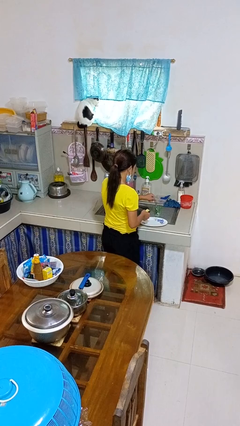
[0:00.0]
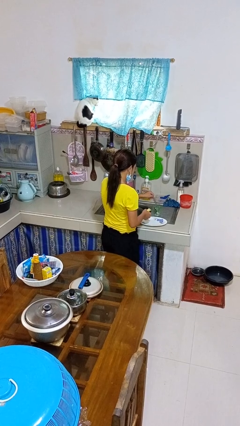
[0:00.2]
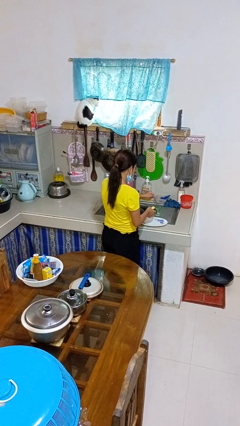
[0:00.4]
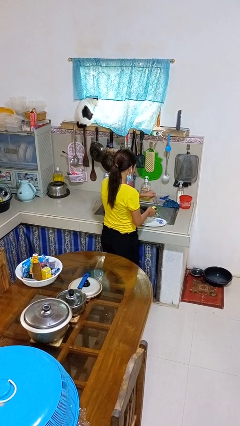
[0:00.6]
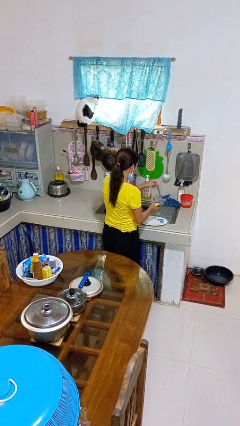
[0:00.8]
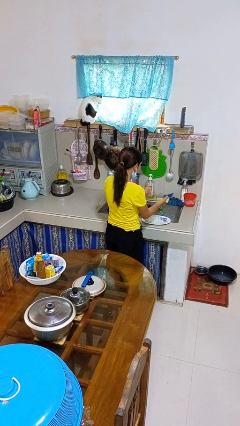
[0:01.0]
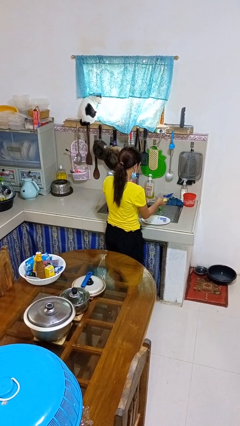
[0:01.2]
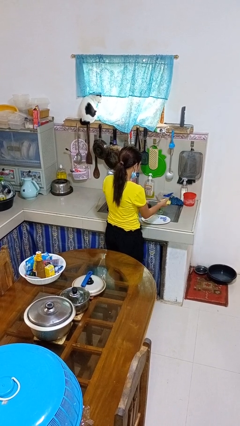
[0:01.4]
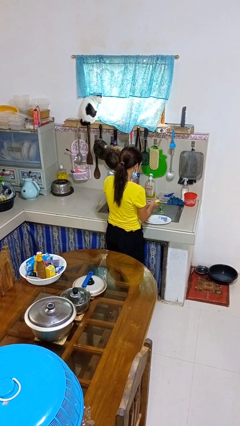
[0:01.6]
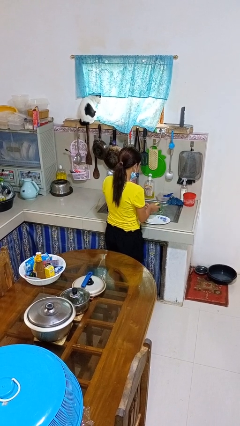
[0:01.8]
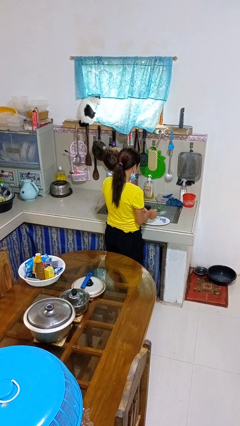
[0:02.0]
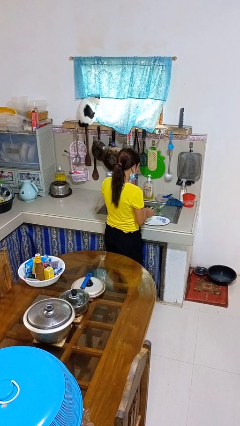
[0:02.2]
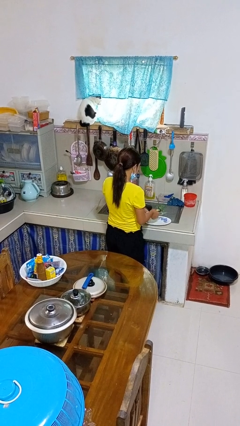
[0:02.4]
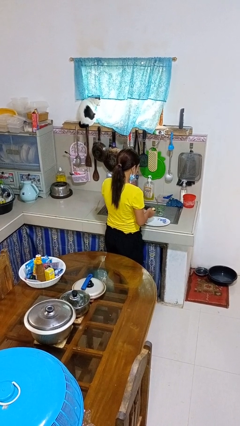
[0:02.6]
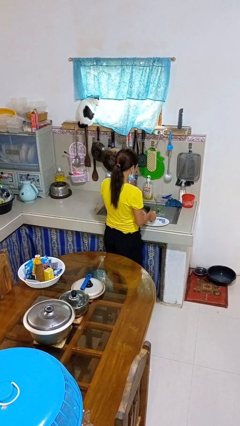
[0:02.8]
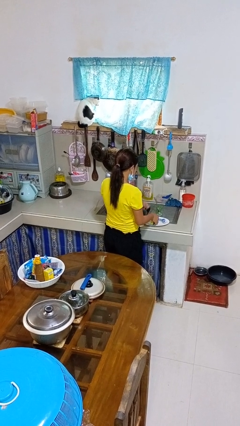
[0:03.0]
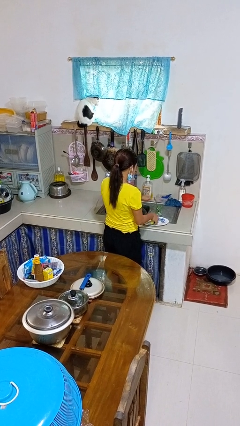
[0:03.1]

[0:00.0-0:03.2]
person washes dish

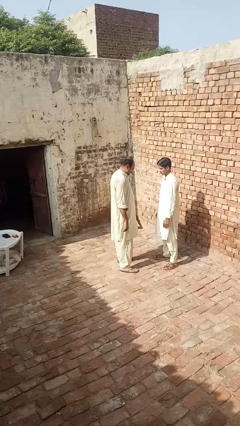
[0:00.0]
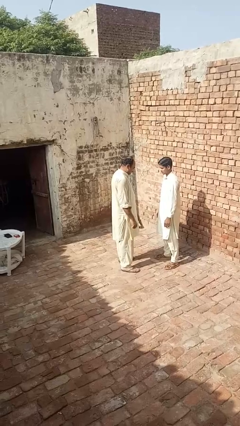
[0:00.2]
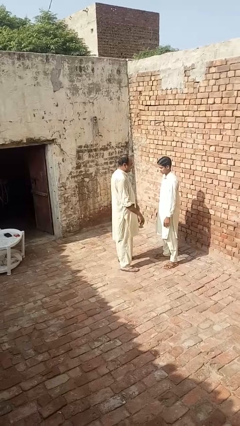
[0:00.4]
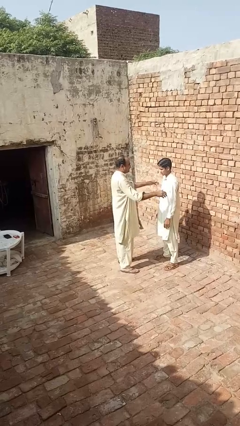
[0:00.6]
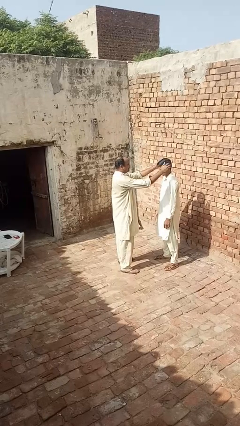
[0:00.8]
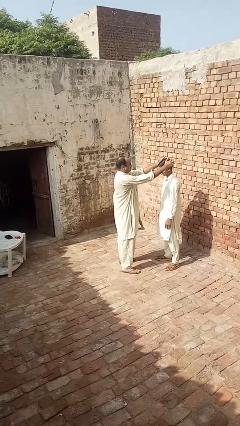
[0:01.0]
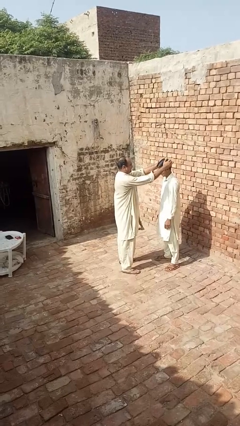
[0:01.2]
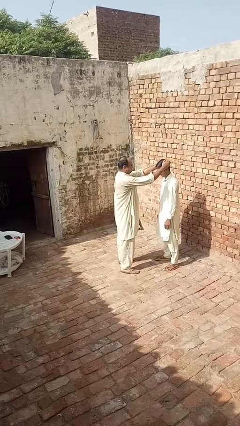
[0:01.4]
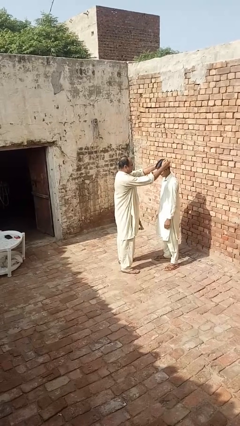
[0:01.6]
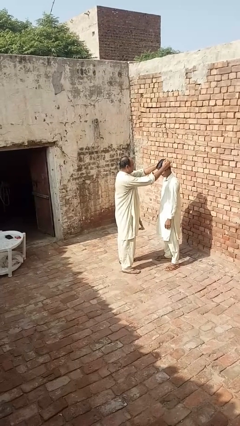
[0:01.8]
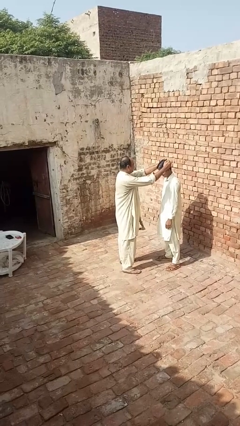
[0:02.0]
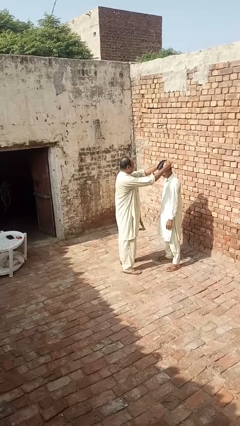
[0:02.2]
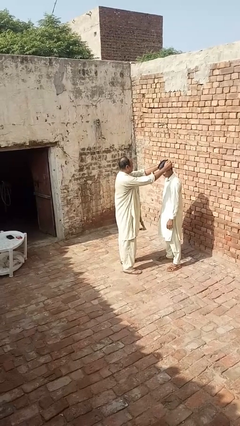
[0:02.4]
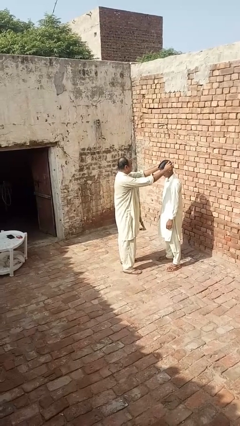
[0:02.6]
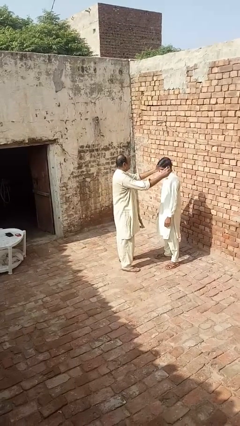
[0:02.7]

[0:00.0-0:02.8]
person grabs person by hair

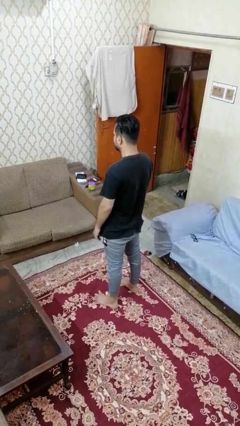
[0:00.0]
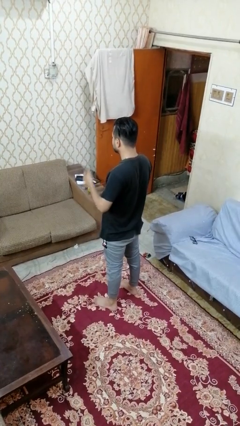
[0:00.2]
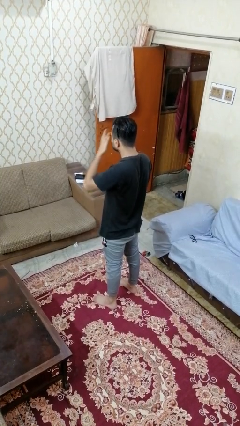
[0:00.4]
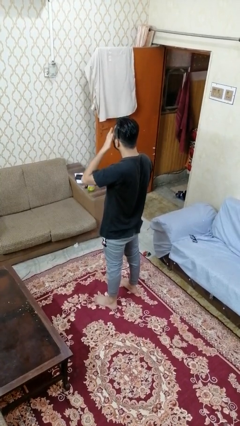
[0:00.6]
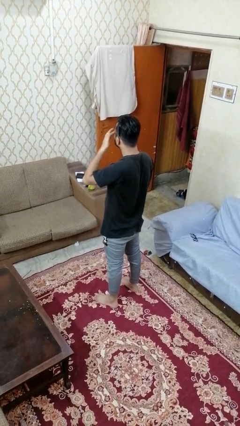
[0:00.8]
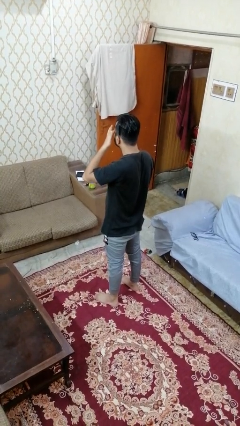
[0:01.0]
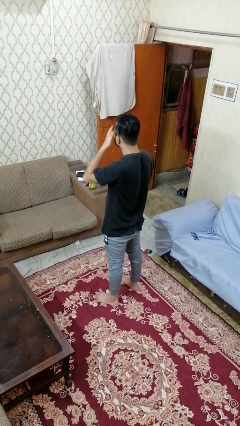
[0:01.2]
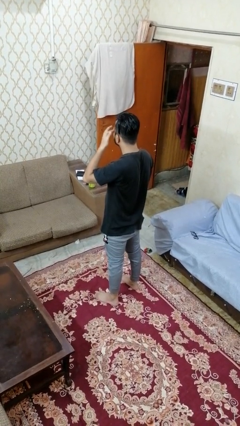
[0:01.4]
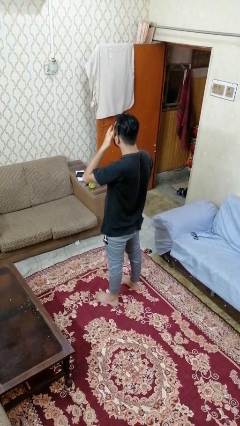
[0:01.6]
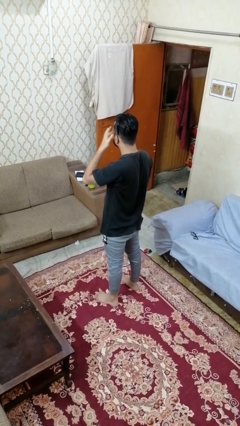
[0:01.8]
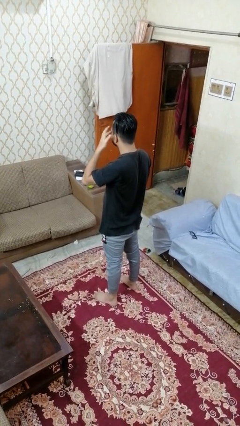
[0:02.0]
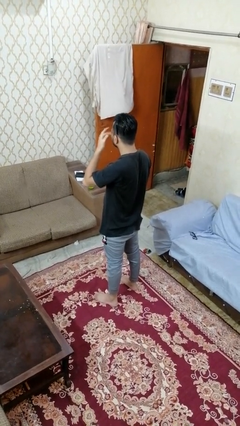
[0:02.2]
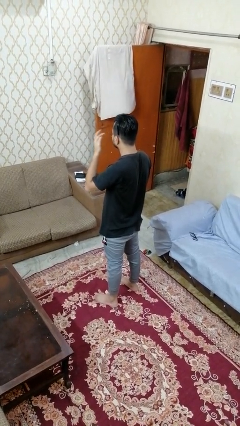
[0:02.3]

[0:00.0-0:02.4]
person rubs eyes

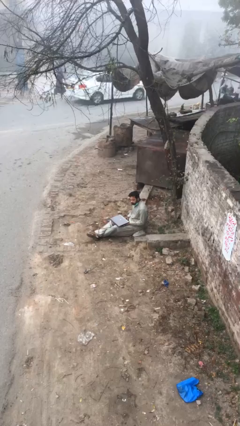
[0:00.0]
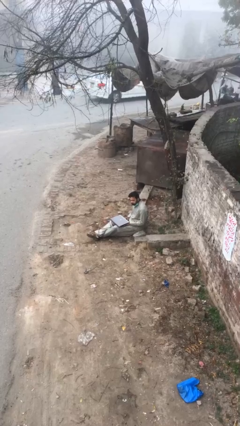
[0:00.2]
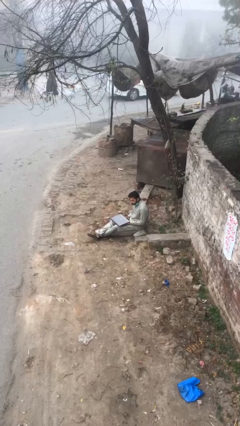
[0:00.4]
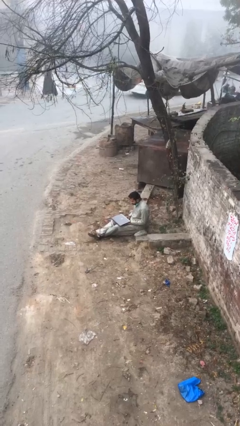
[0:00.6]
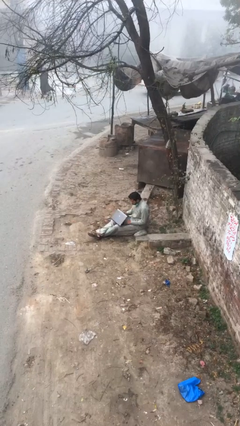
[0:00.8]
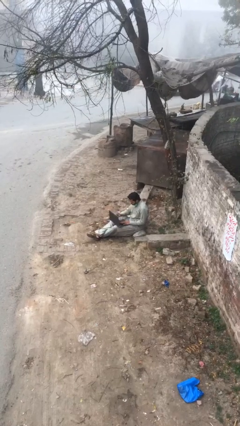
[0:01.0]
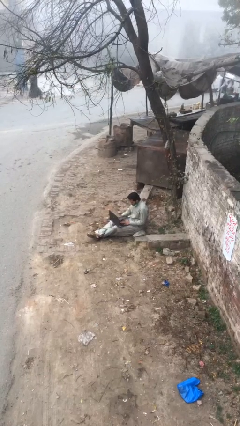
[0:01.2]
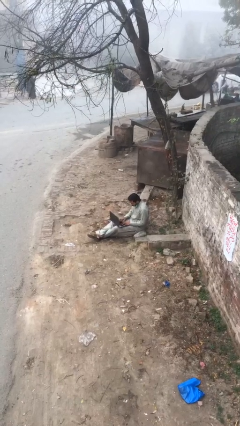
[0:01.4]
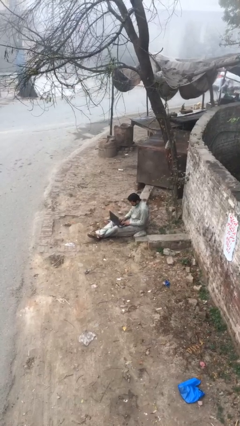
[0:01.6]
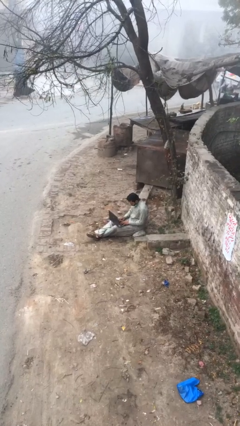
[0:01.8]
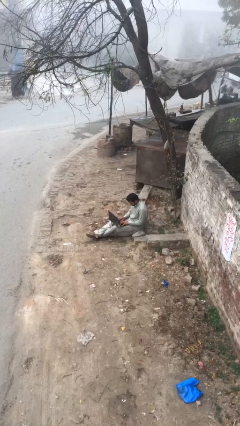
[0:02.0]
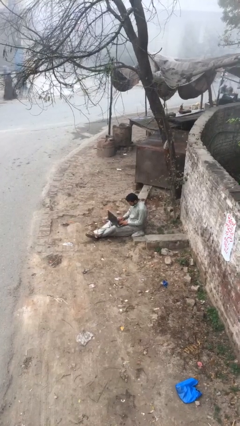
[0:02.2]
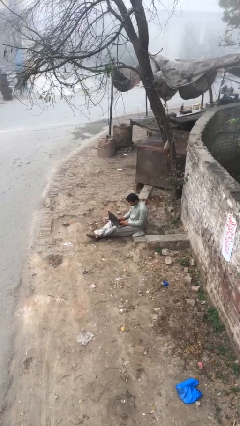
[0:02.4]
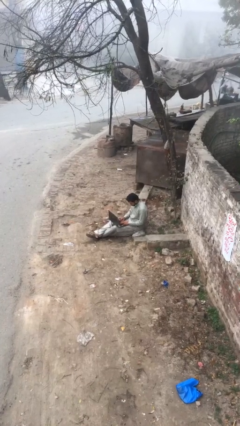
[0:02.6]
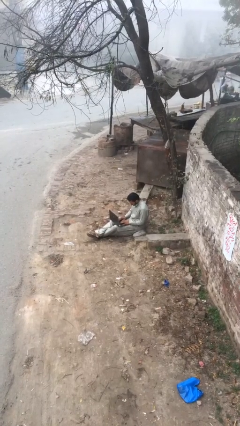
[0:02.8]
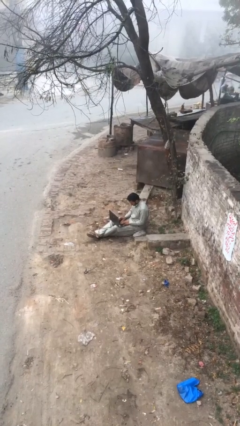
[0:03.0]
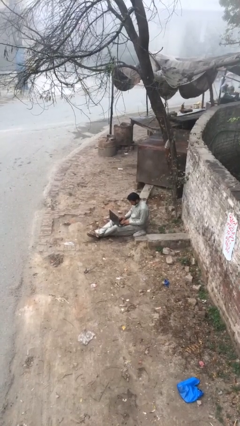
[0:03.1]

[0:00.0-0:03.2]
person interacts with laptop

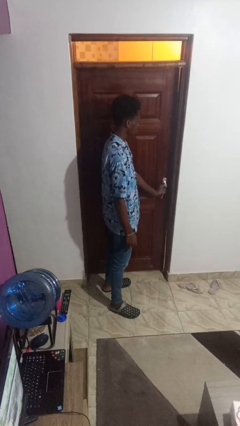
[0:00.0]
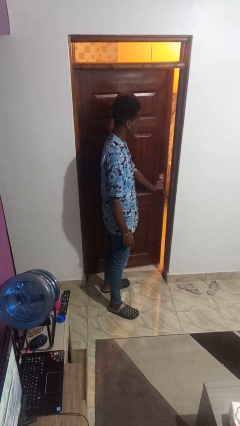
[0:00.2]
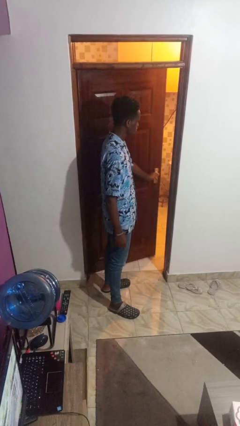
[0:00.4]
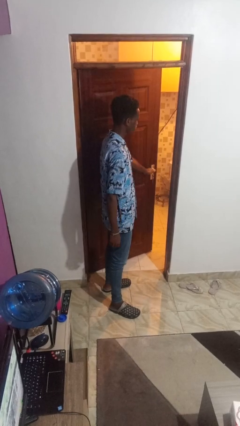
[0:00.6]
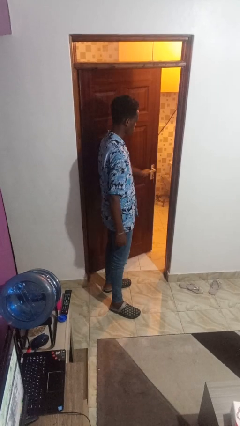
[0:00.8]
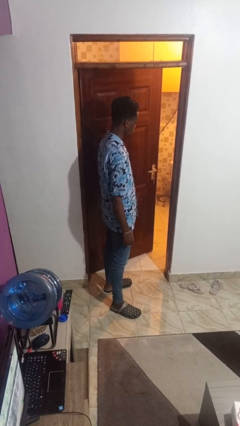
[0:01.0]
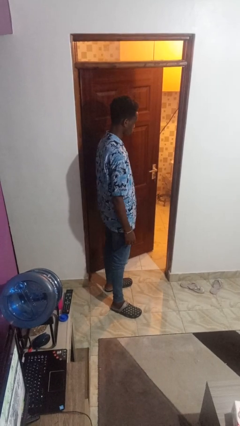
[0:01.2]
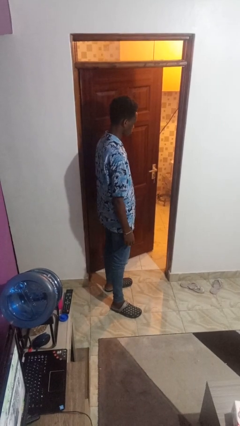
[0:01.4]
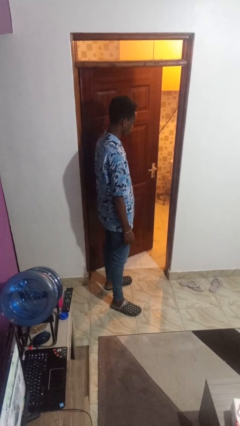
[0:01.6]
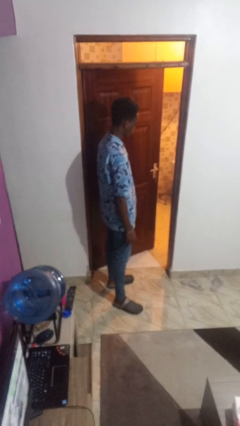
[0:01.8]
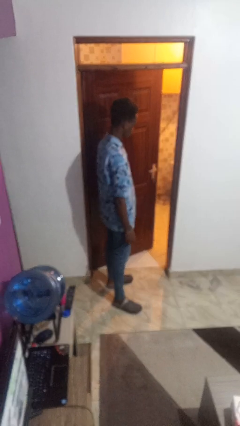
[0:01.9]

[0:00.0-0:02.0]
person opens facility door

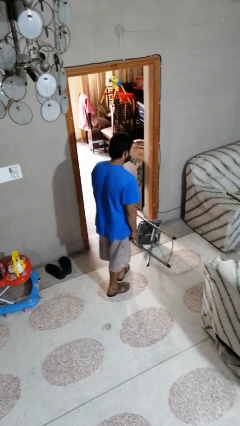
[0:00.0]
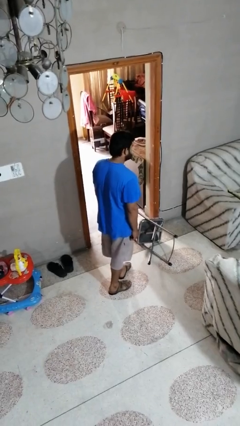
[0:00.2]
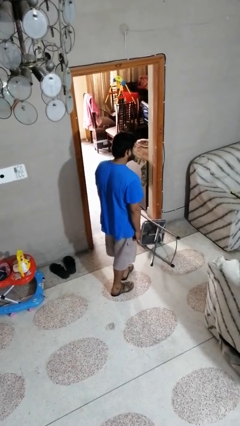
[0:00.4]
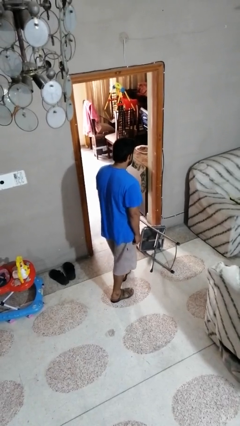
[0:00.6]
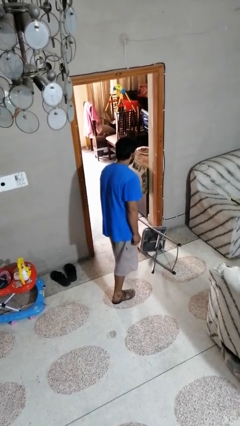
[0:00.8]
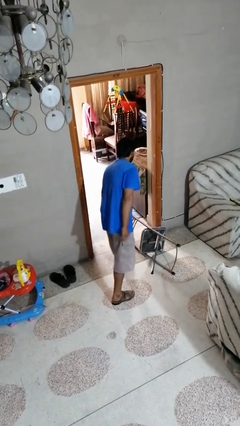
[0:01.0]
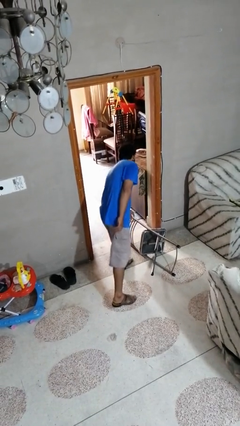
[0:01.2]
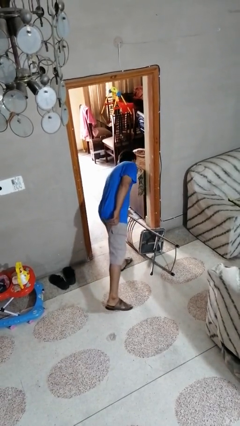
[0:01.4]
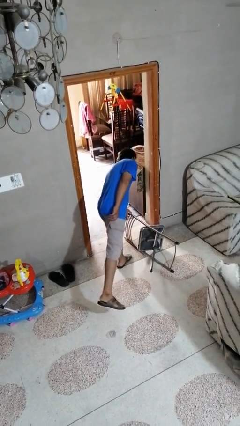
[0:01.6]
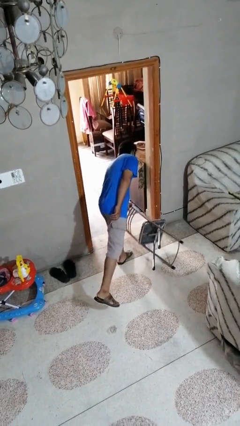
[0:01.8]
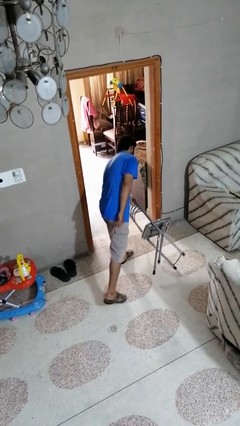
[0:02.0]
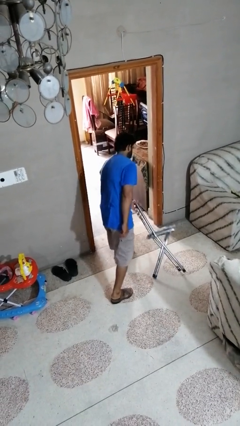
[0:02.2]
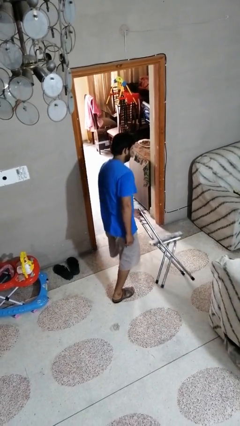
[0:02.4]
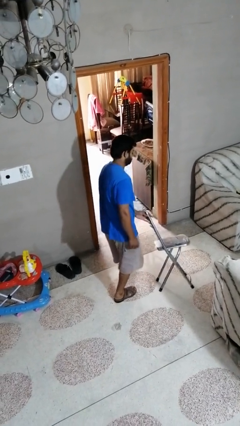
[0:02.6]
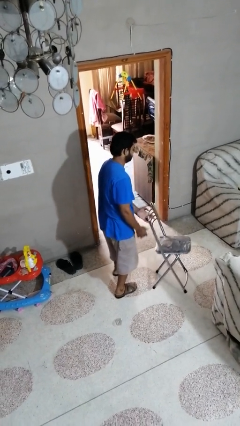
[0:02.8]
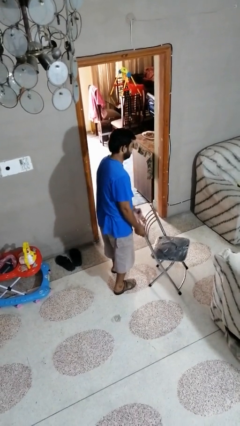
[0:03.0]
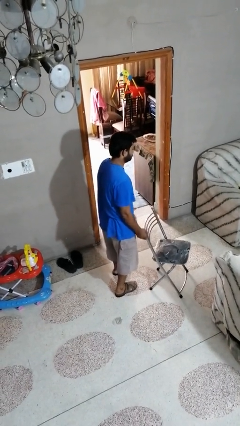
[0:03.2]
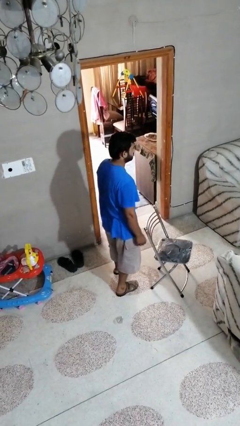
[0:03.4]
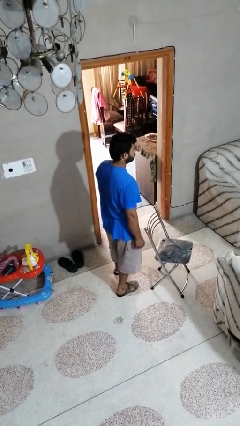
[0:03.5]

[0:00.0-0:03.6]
person sets upright furniture

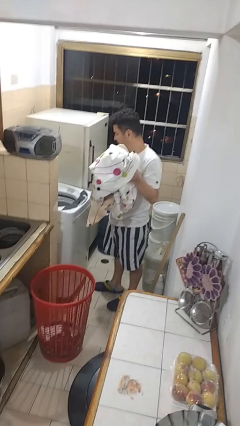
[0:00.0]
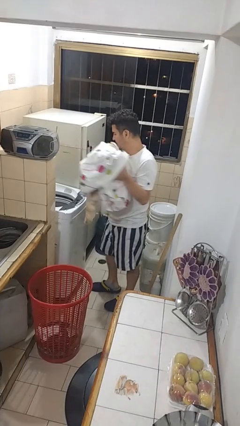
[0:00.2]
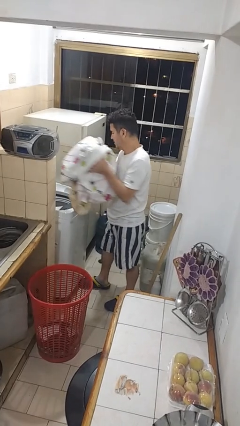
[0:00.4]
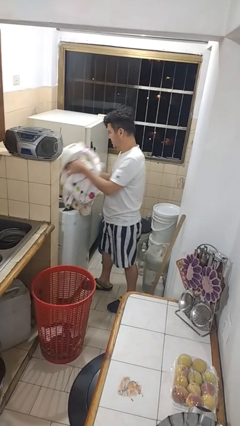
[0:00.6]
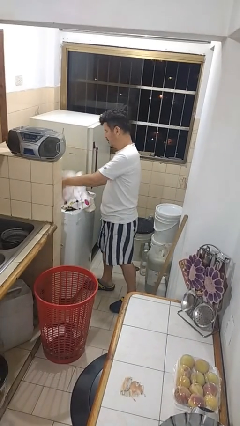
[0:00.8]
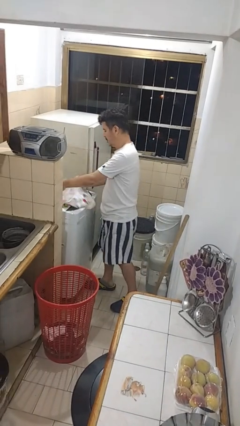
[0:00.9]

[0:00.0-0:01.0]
person loads clotheswasher
